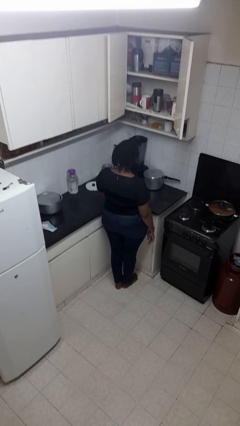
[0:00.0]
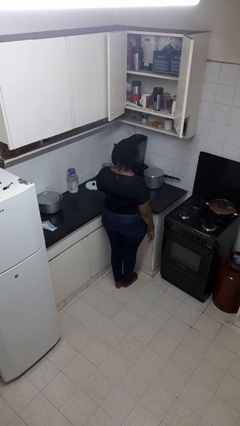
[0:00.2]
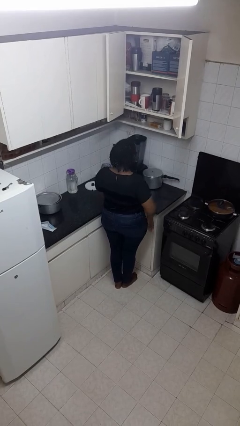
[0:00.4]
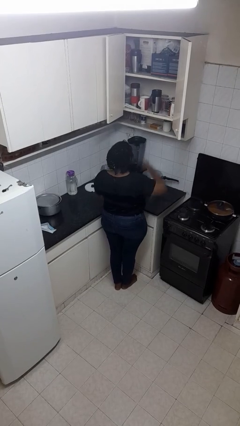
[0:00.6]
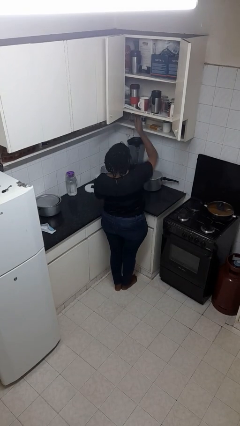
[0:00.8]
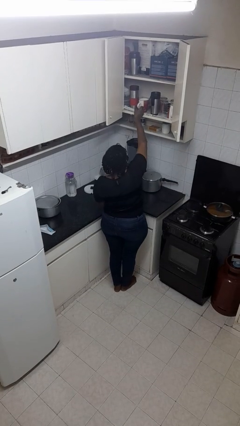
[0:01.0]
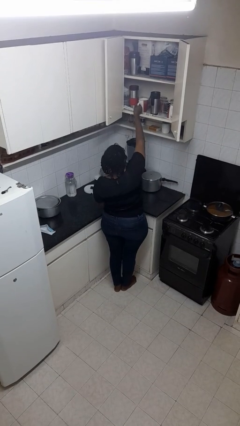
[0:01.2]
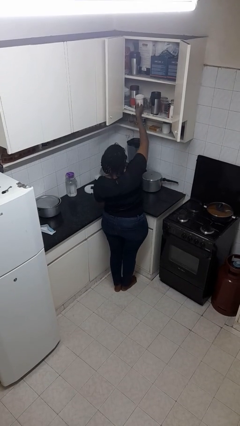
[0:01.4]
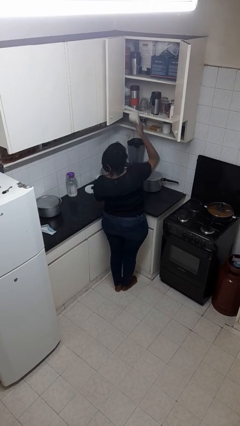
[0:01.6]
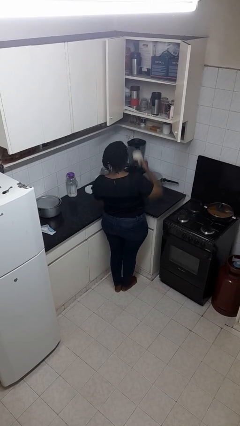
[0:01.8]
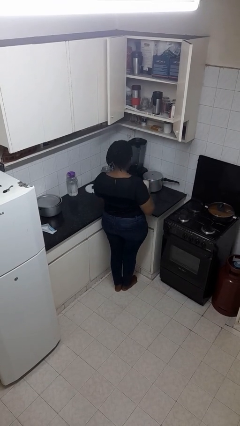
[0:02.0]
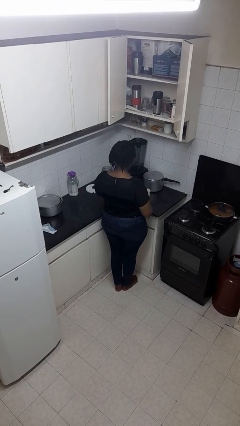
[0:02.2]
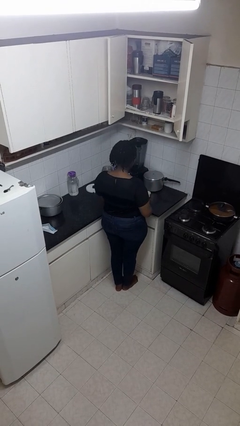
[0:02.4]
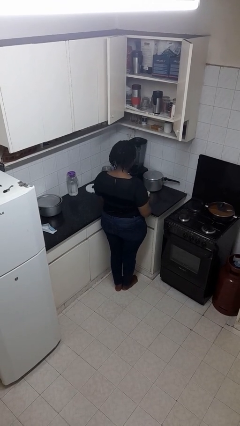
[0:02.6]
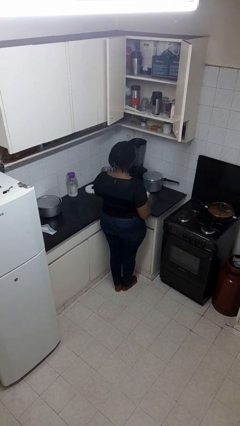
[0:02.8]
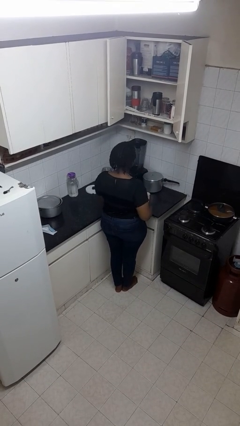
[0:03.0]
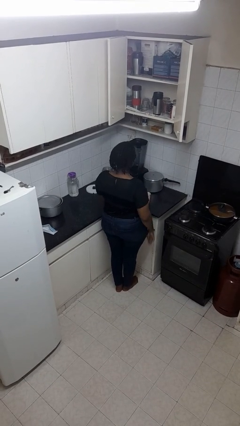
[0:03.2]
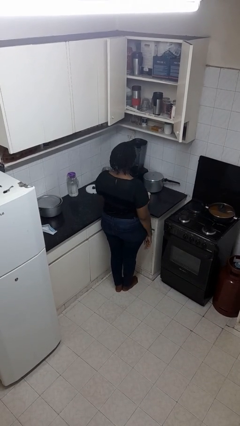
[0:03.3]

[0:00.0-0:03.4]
person takes object from cabinet

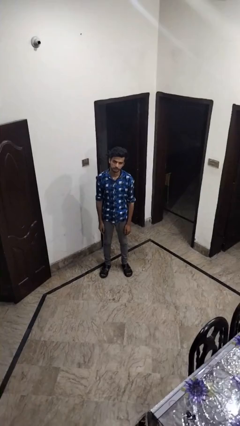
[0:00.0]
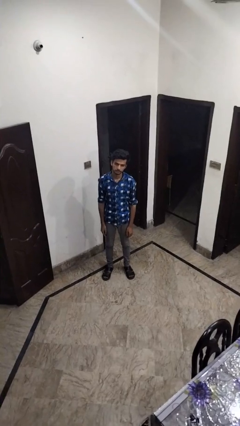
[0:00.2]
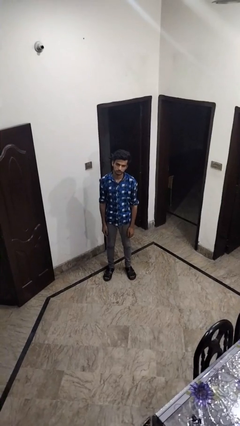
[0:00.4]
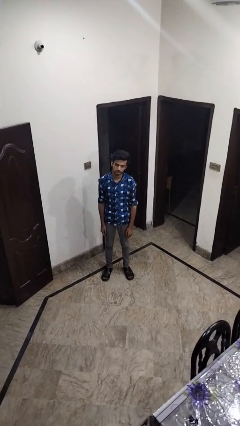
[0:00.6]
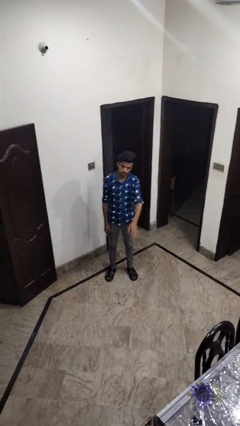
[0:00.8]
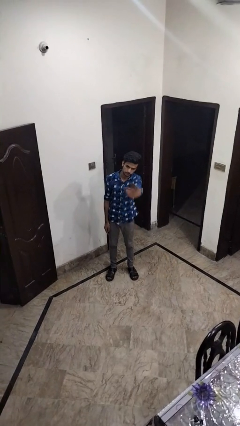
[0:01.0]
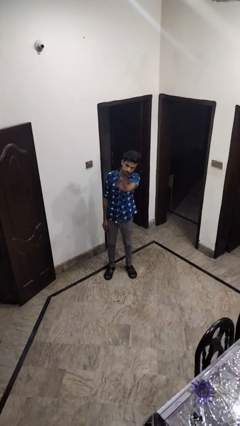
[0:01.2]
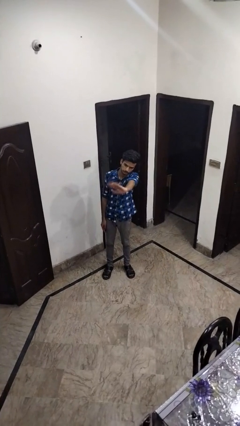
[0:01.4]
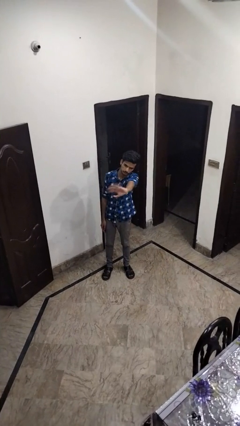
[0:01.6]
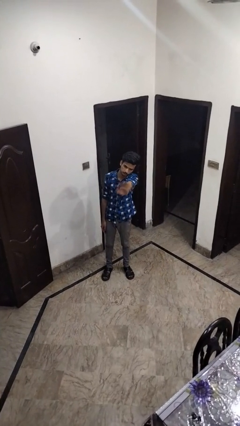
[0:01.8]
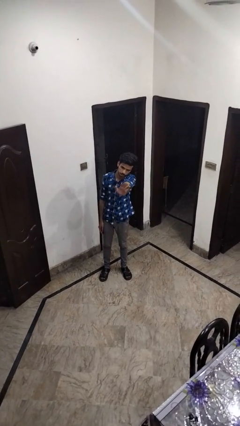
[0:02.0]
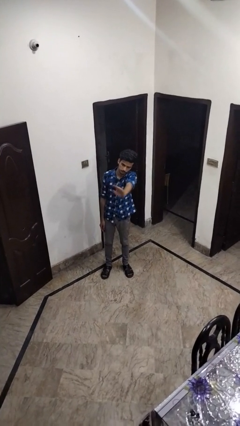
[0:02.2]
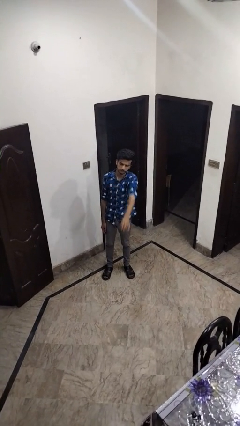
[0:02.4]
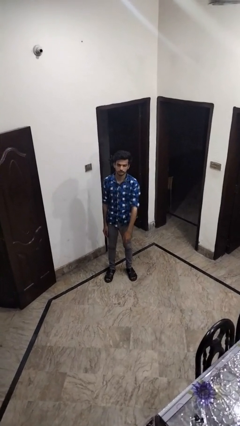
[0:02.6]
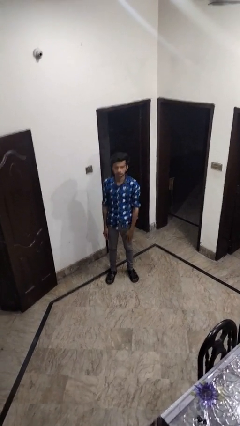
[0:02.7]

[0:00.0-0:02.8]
person waves at person

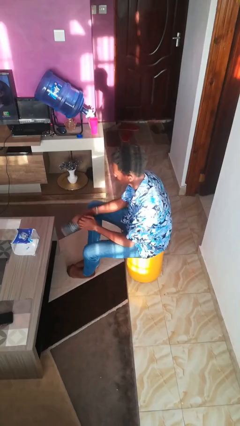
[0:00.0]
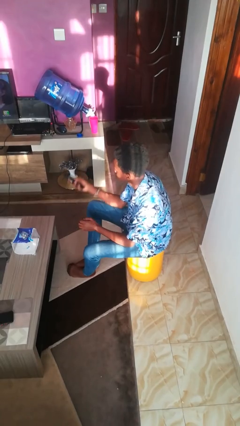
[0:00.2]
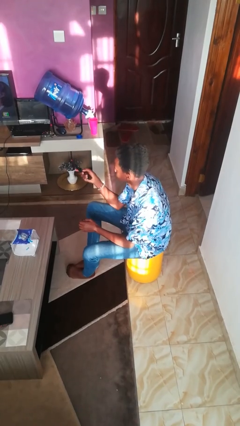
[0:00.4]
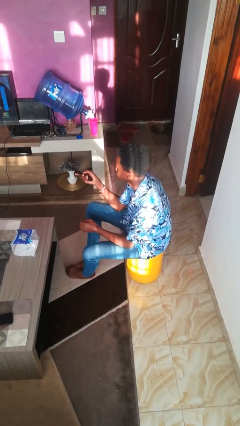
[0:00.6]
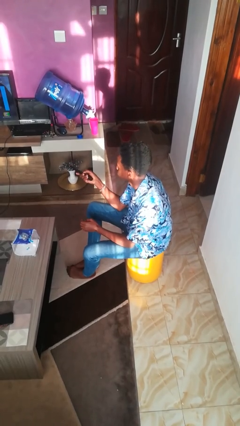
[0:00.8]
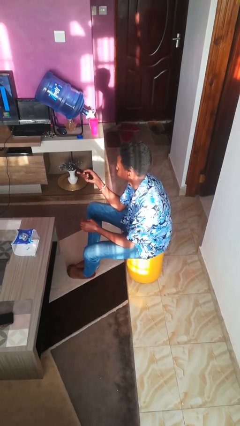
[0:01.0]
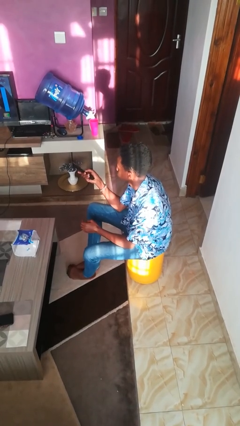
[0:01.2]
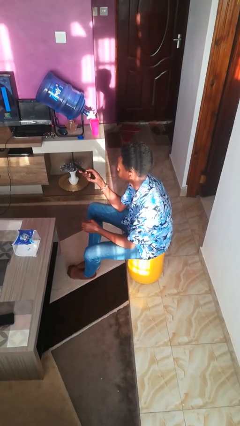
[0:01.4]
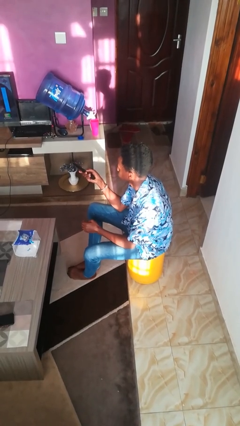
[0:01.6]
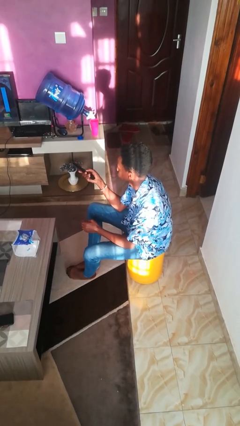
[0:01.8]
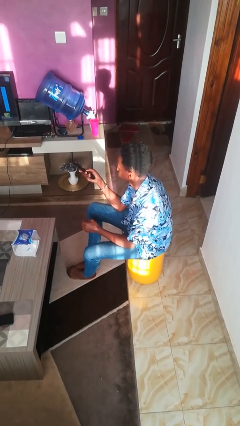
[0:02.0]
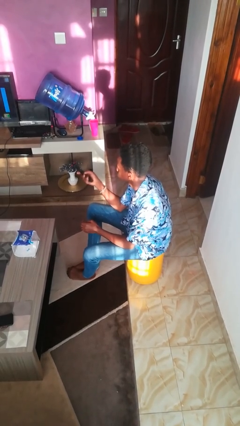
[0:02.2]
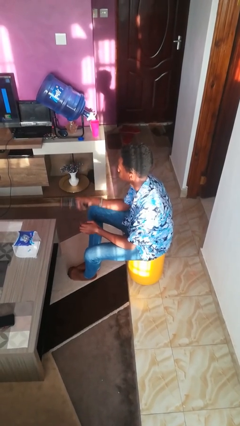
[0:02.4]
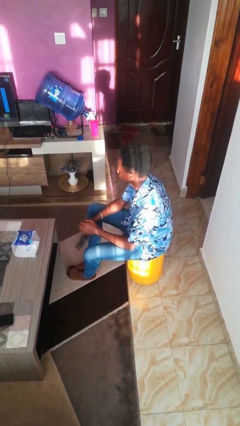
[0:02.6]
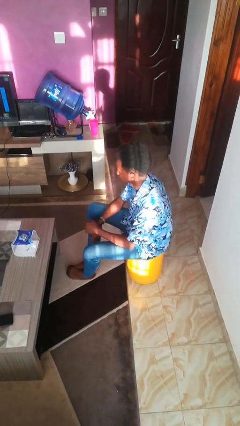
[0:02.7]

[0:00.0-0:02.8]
person uses television remote

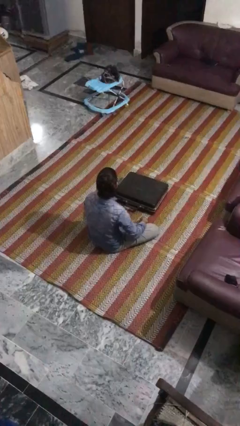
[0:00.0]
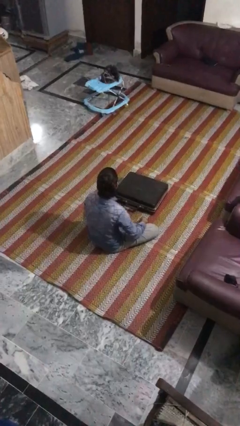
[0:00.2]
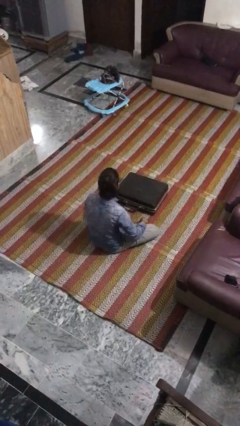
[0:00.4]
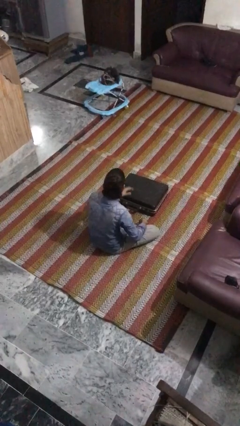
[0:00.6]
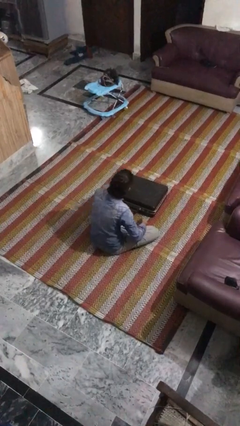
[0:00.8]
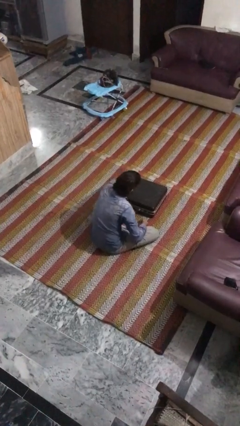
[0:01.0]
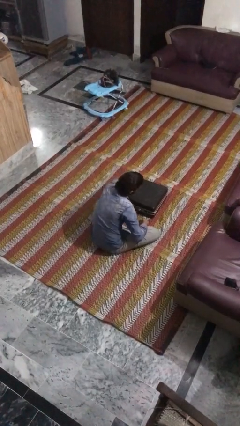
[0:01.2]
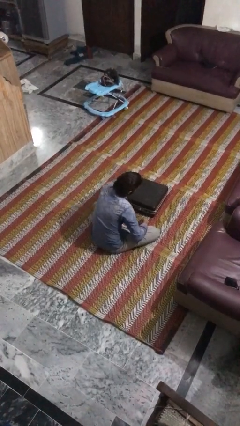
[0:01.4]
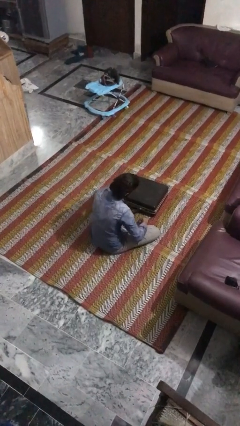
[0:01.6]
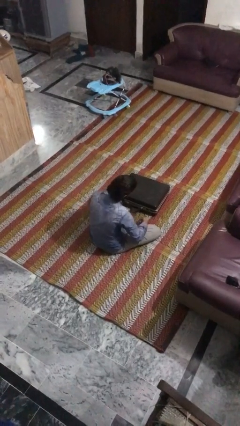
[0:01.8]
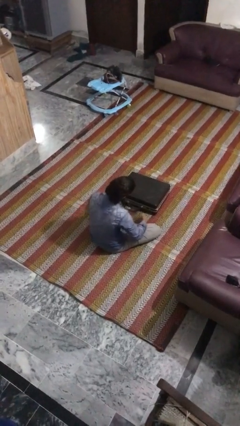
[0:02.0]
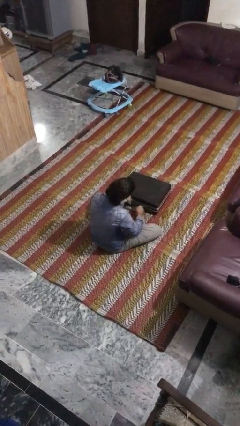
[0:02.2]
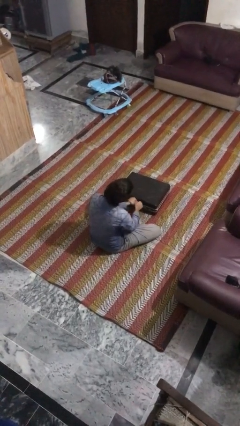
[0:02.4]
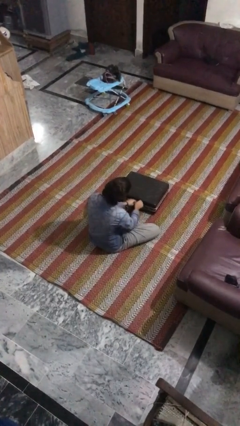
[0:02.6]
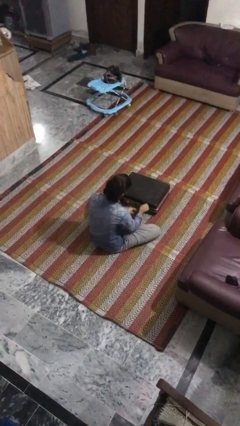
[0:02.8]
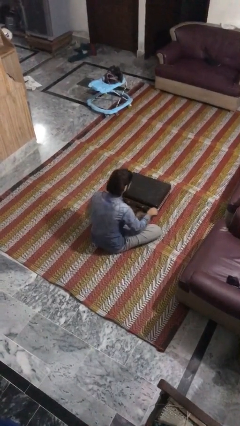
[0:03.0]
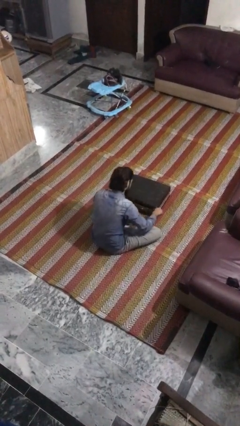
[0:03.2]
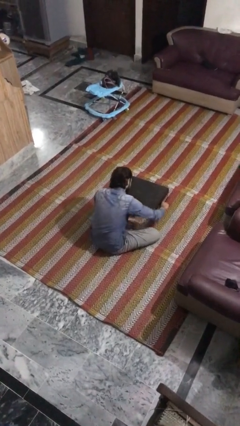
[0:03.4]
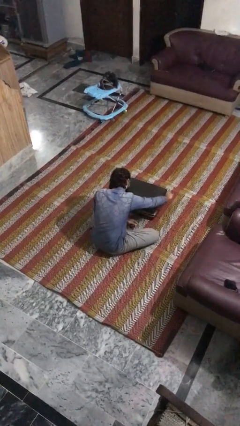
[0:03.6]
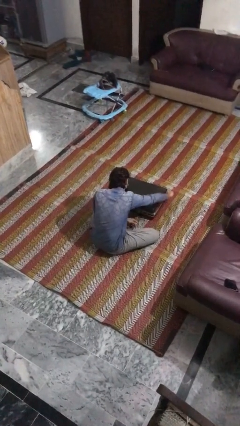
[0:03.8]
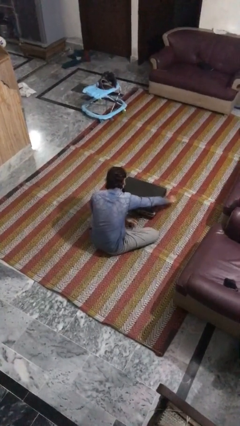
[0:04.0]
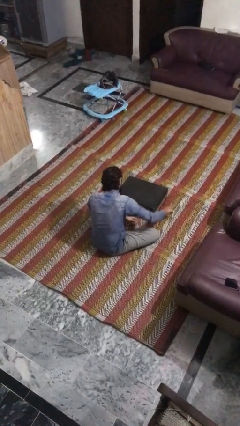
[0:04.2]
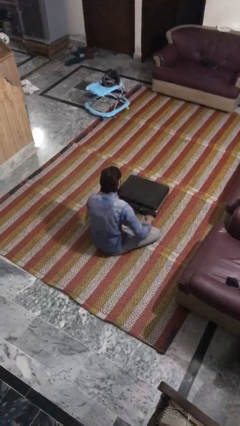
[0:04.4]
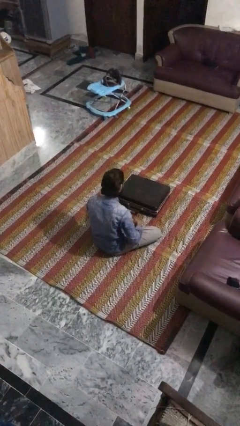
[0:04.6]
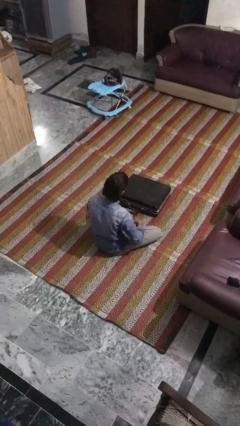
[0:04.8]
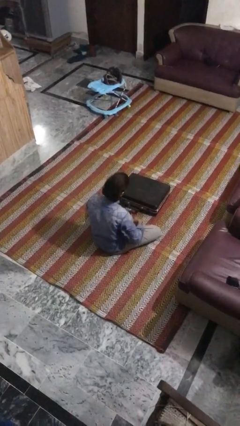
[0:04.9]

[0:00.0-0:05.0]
person closes suitcase

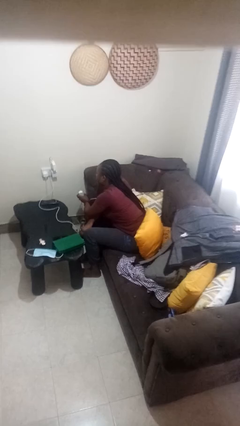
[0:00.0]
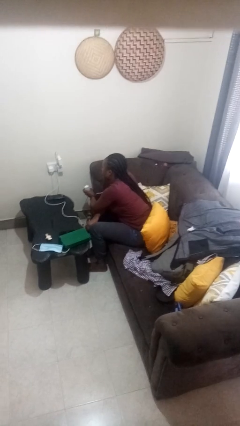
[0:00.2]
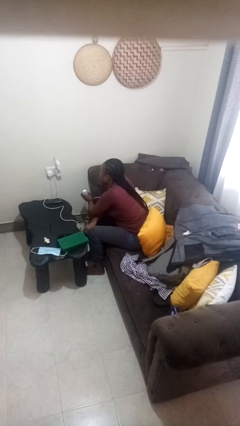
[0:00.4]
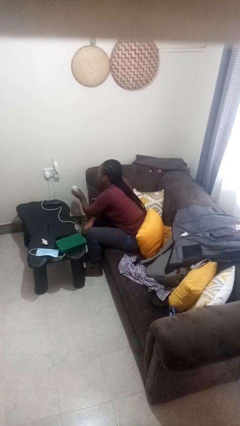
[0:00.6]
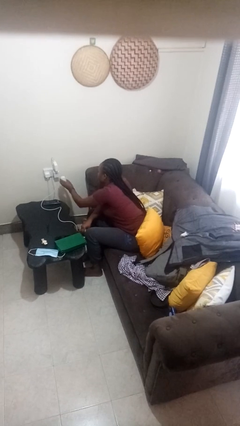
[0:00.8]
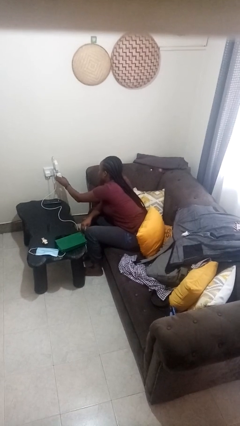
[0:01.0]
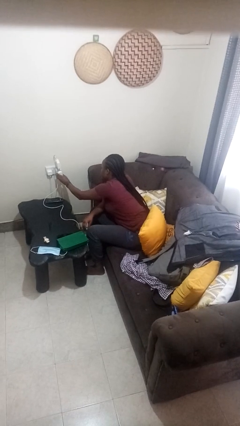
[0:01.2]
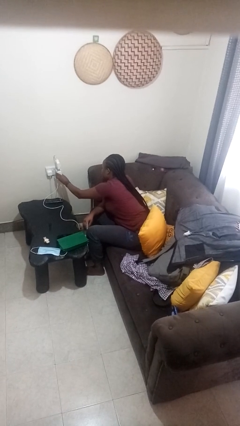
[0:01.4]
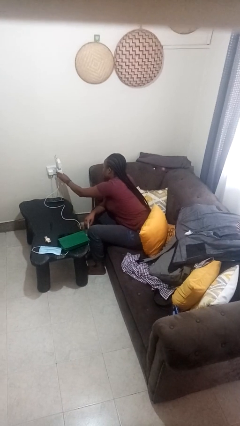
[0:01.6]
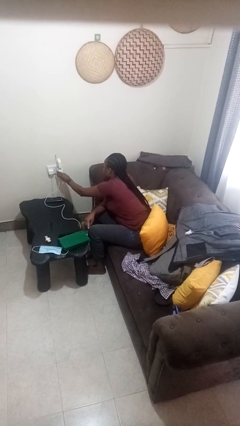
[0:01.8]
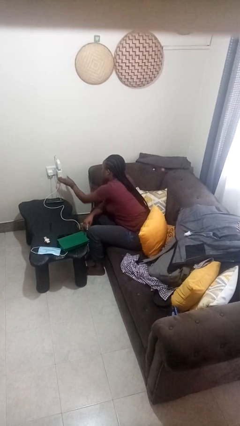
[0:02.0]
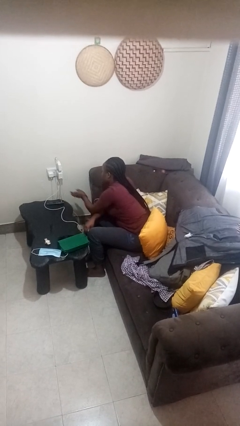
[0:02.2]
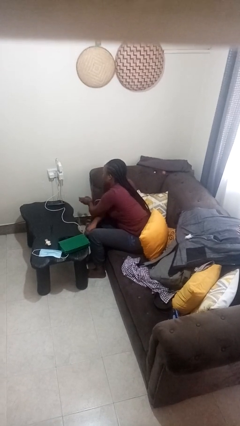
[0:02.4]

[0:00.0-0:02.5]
person plugs into electrical socket

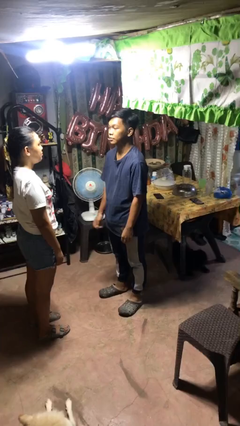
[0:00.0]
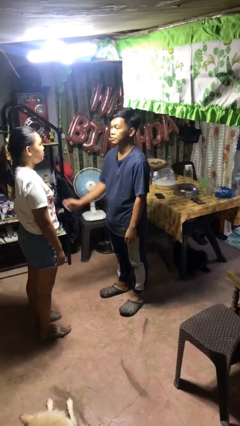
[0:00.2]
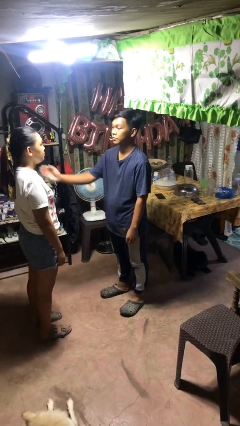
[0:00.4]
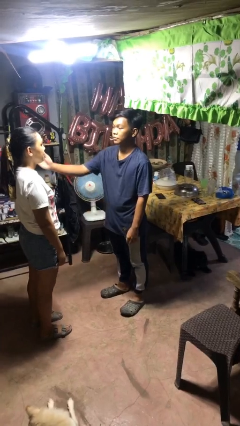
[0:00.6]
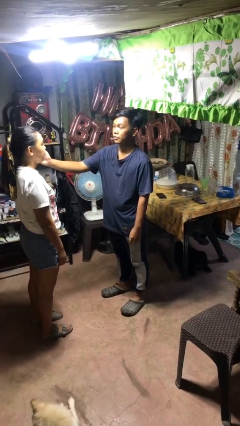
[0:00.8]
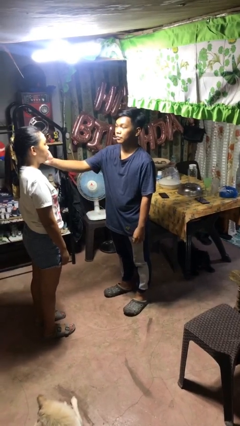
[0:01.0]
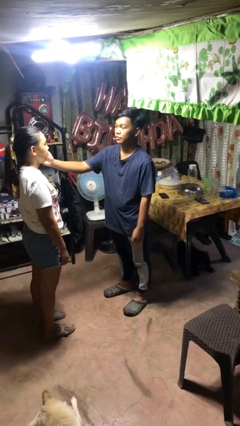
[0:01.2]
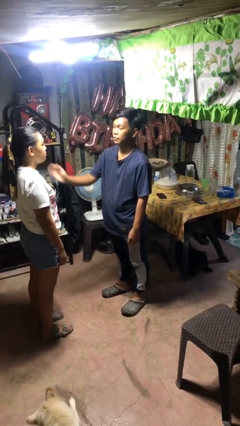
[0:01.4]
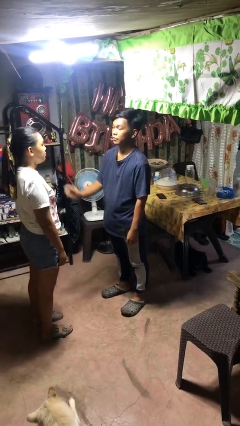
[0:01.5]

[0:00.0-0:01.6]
person touches face of person
